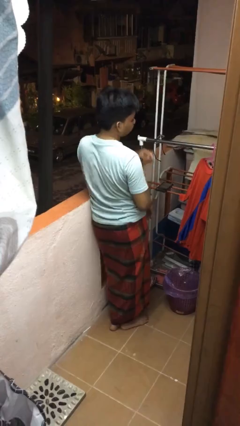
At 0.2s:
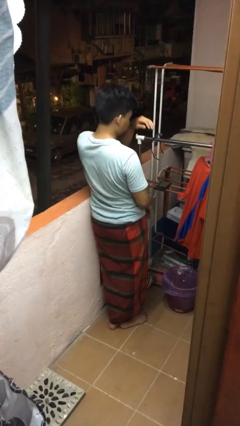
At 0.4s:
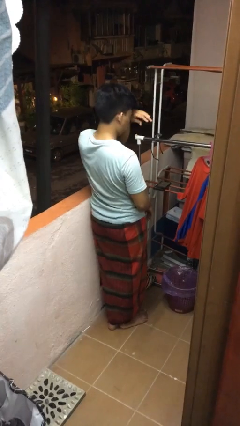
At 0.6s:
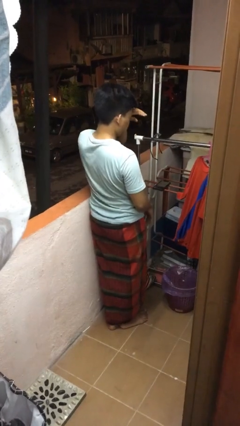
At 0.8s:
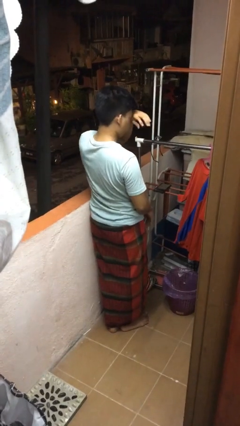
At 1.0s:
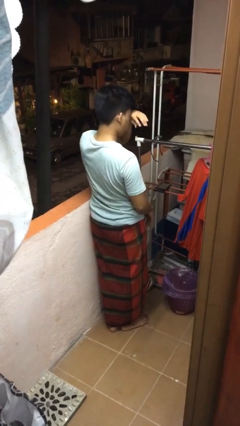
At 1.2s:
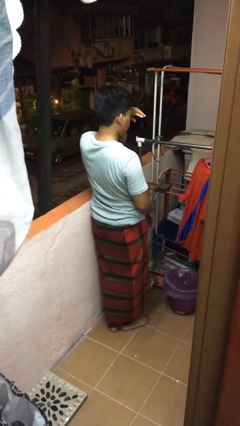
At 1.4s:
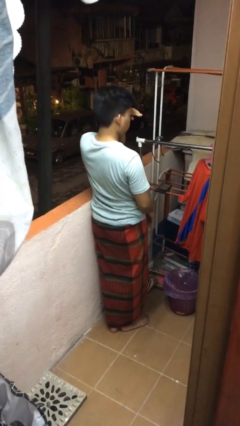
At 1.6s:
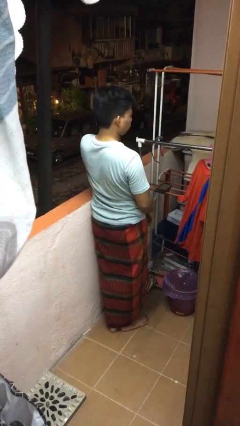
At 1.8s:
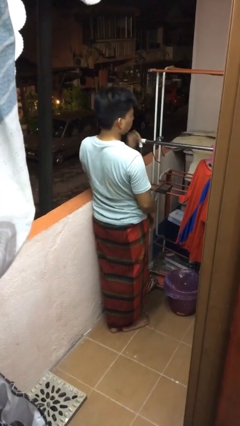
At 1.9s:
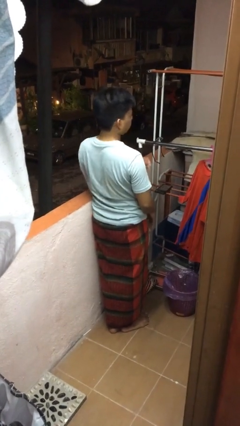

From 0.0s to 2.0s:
person rubs eyes

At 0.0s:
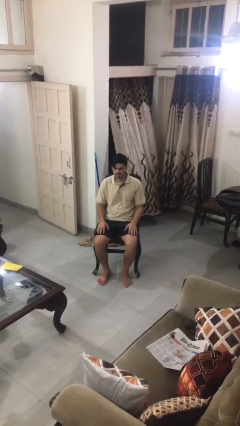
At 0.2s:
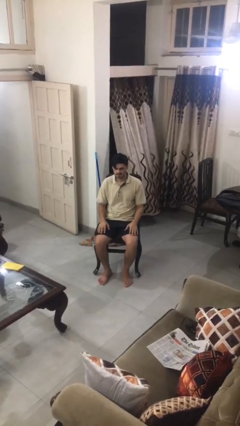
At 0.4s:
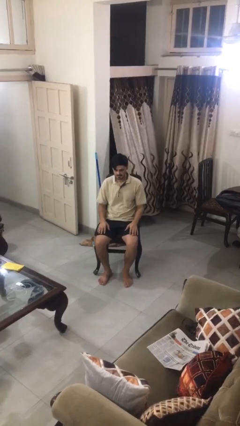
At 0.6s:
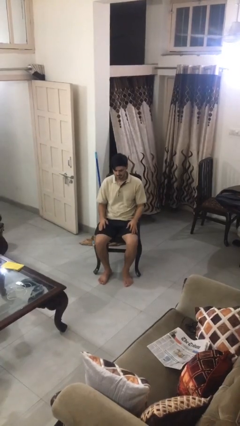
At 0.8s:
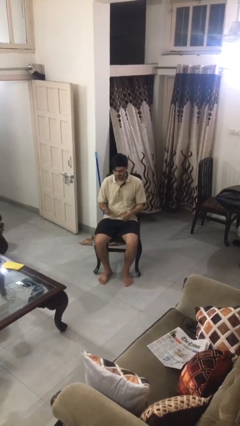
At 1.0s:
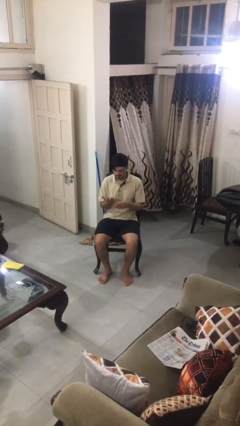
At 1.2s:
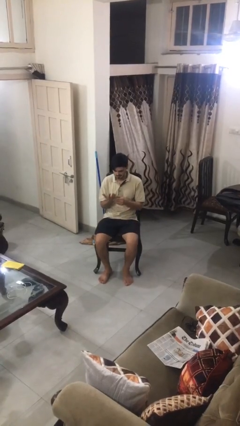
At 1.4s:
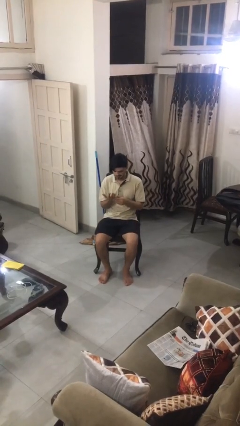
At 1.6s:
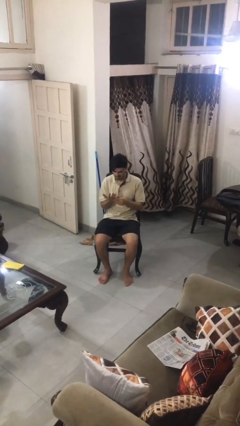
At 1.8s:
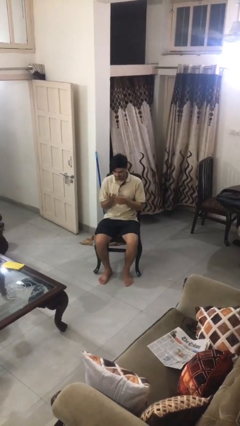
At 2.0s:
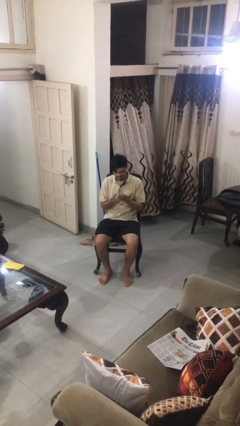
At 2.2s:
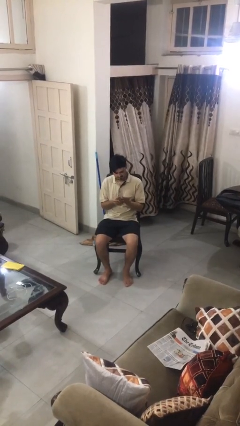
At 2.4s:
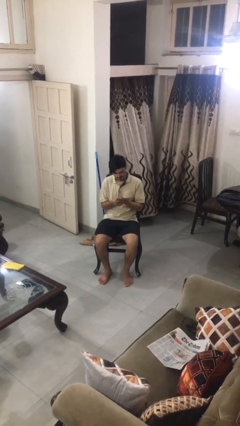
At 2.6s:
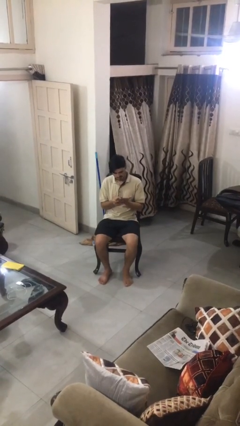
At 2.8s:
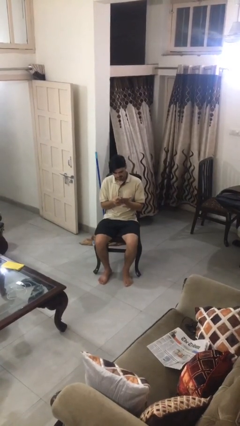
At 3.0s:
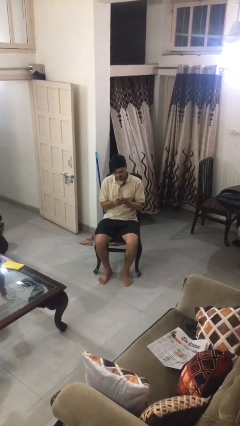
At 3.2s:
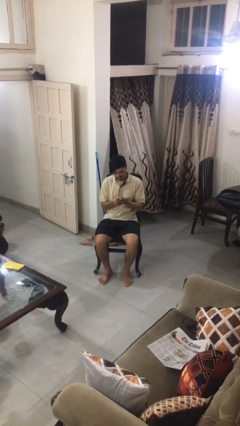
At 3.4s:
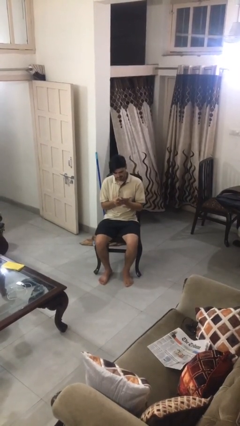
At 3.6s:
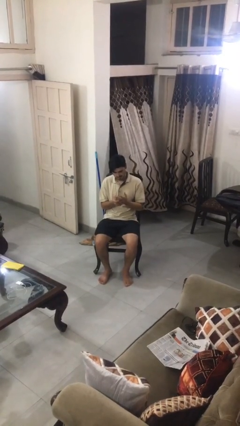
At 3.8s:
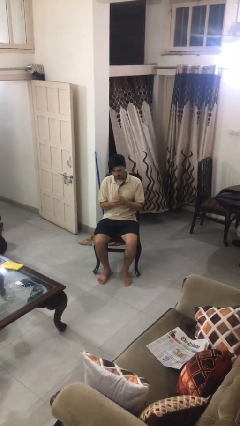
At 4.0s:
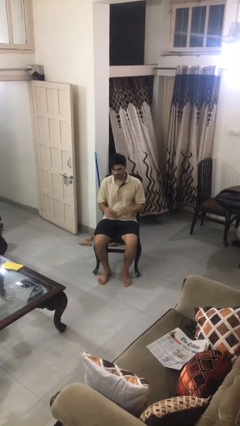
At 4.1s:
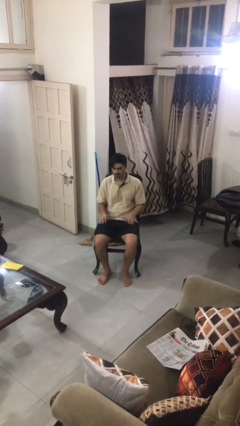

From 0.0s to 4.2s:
person looks at hands in lap

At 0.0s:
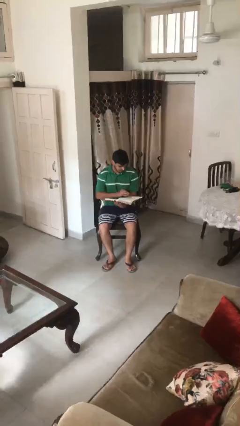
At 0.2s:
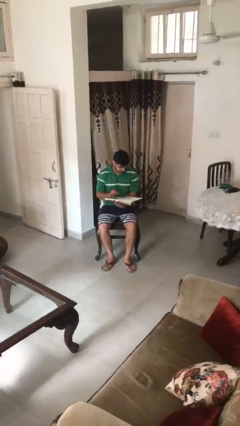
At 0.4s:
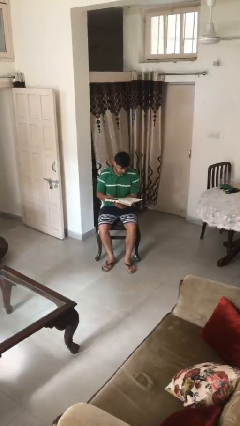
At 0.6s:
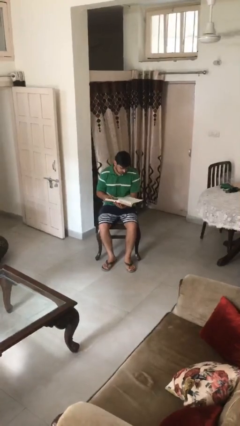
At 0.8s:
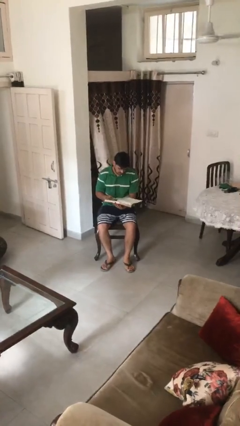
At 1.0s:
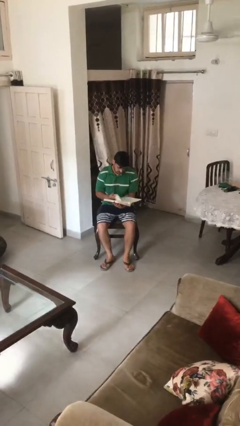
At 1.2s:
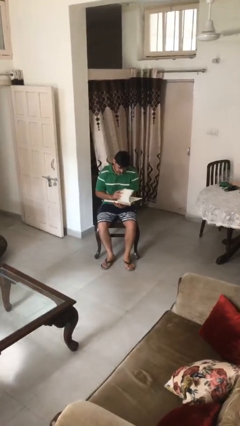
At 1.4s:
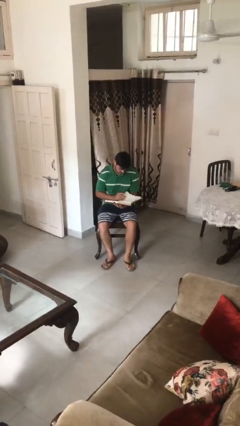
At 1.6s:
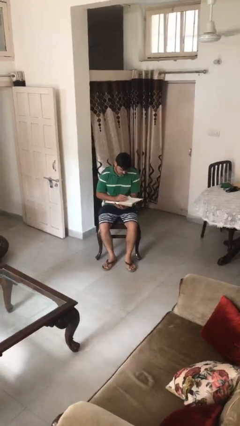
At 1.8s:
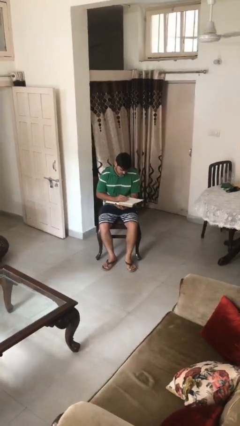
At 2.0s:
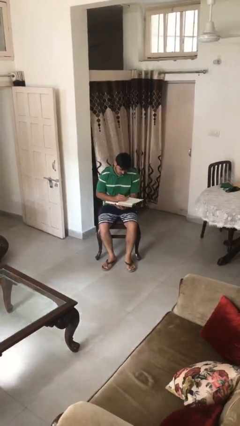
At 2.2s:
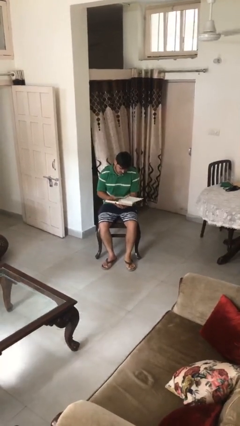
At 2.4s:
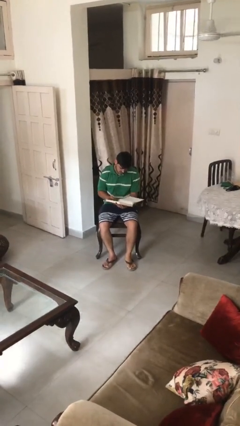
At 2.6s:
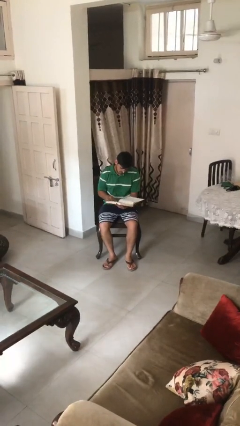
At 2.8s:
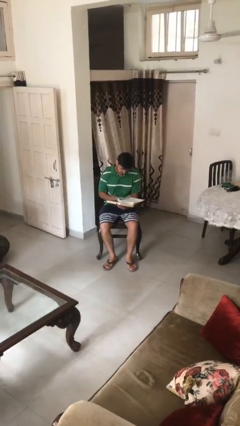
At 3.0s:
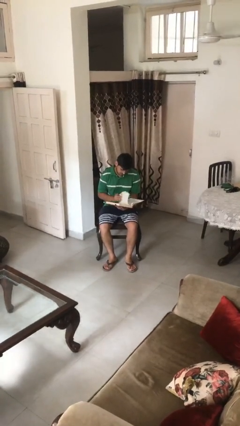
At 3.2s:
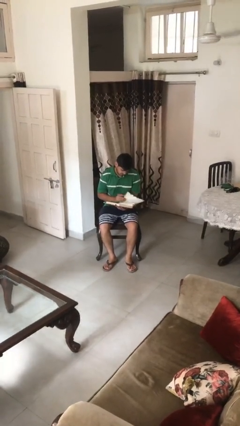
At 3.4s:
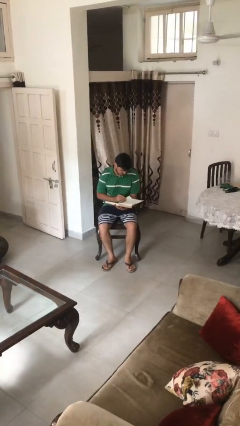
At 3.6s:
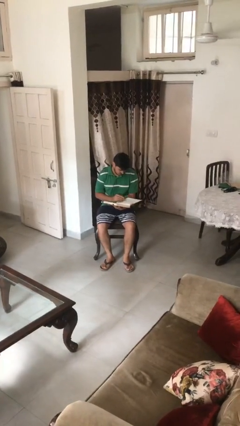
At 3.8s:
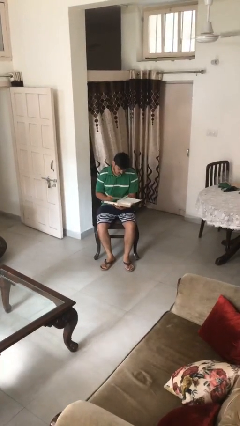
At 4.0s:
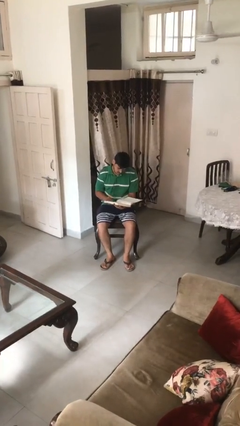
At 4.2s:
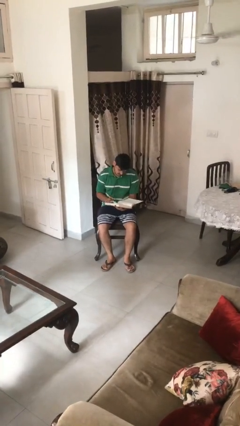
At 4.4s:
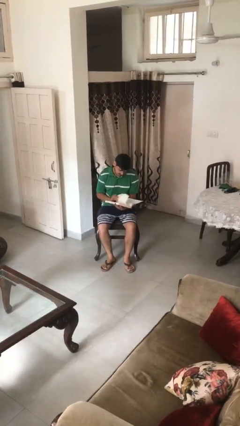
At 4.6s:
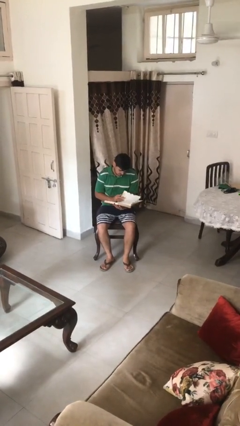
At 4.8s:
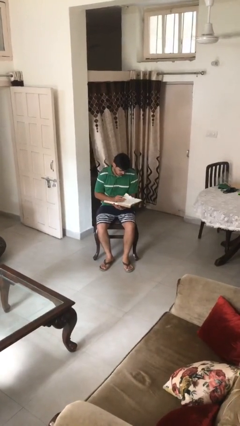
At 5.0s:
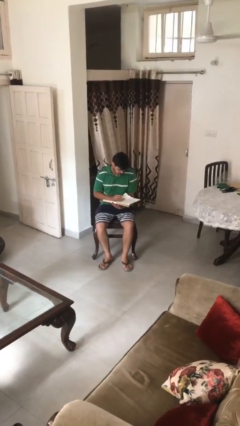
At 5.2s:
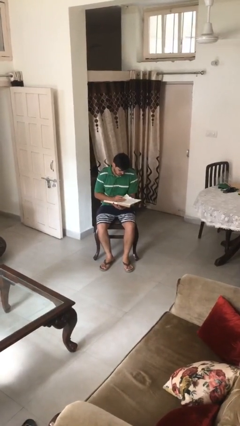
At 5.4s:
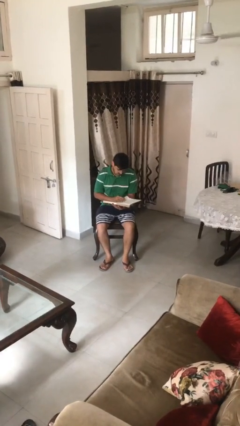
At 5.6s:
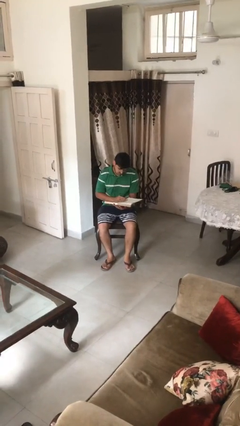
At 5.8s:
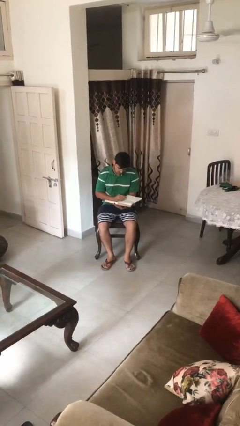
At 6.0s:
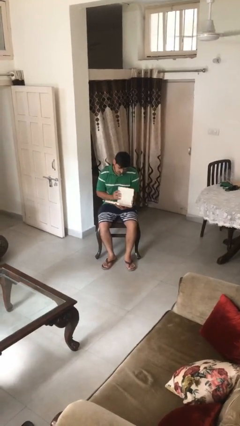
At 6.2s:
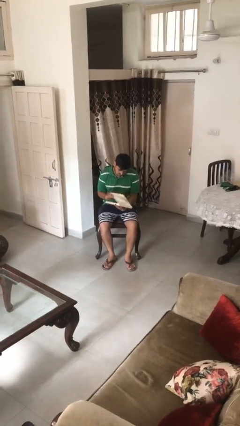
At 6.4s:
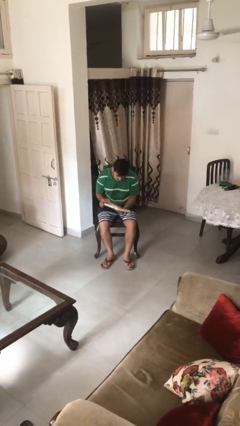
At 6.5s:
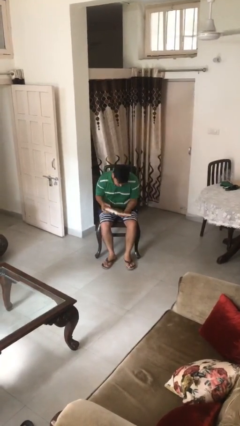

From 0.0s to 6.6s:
person reads document

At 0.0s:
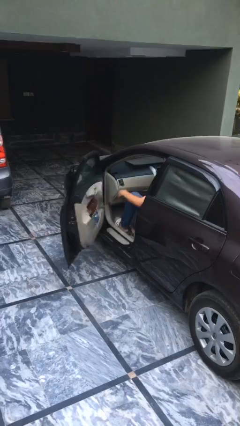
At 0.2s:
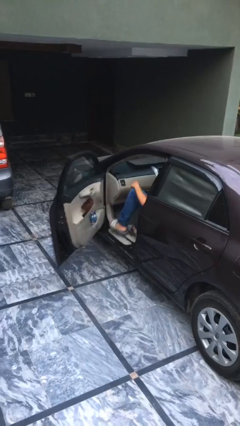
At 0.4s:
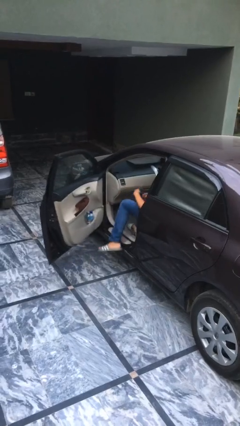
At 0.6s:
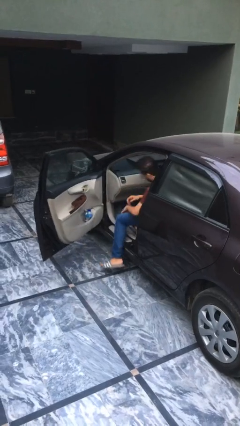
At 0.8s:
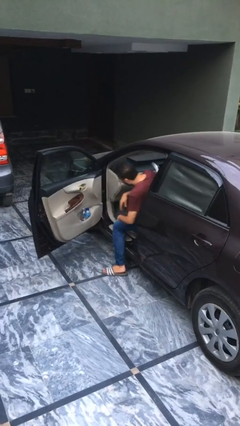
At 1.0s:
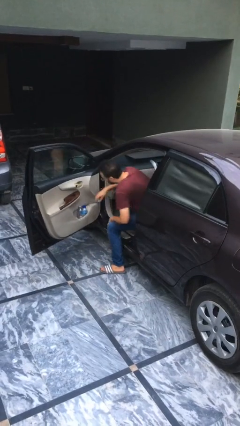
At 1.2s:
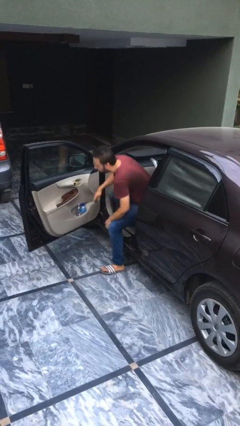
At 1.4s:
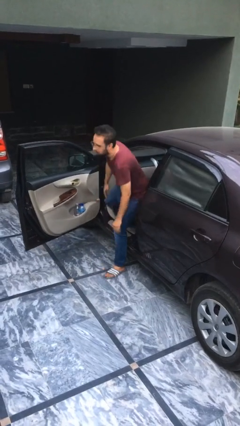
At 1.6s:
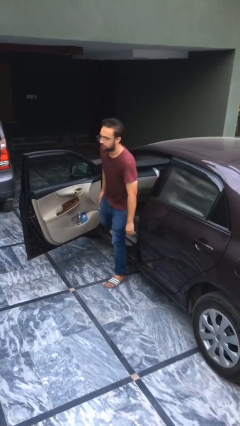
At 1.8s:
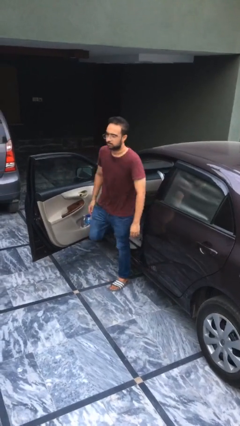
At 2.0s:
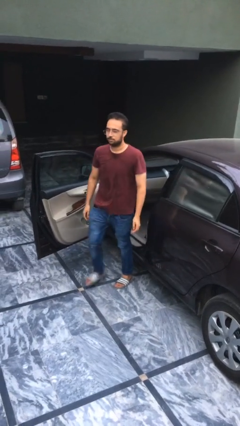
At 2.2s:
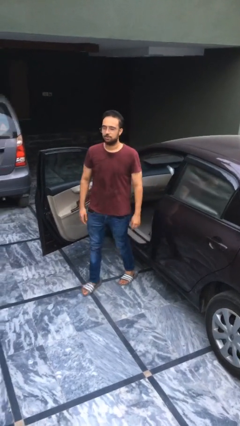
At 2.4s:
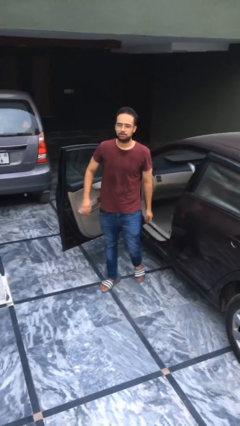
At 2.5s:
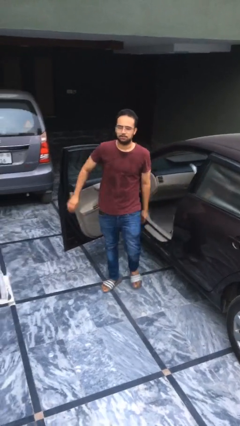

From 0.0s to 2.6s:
person exits car

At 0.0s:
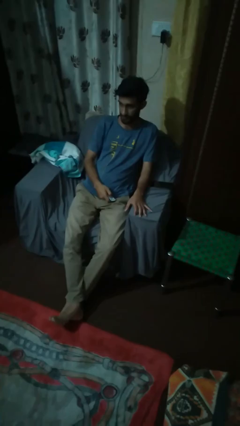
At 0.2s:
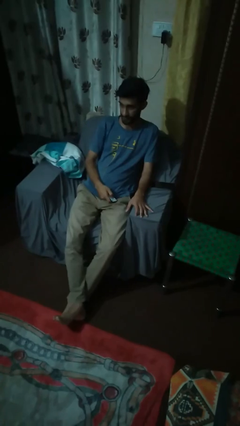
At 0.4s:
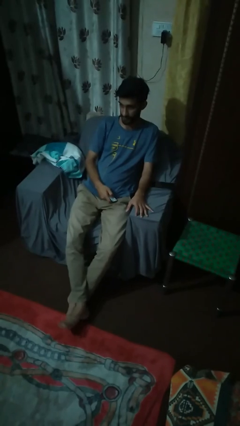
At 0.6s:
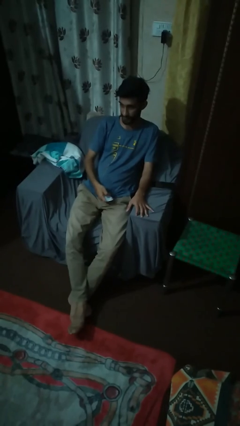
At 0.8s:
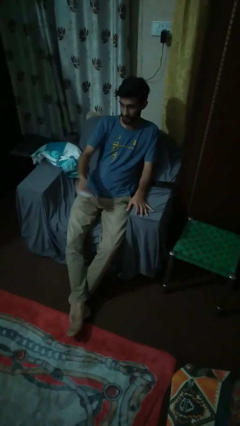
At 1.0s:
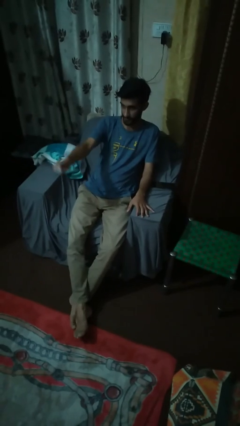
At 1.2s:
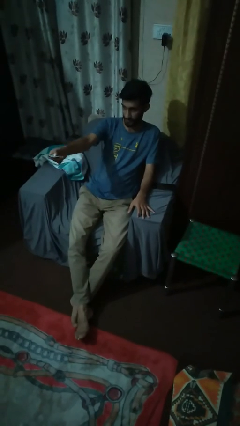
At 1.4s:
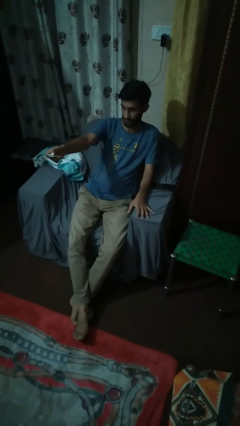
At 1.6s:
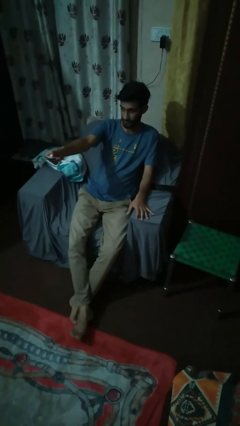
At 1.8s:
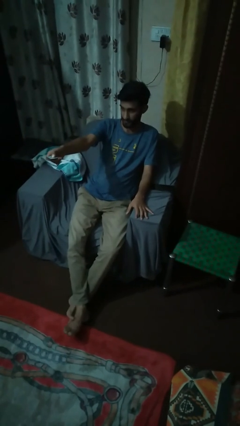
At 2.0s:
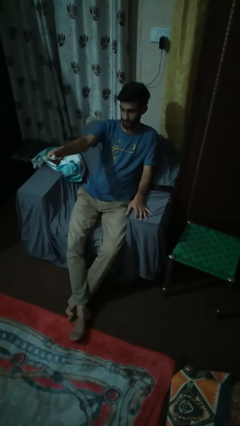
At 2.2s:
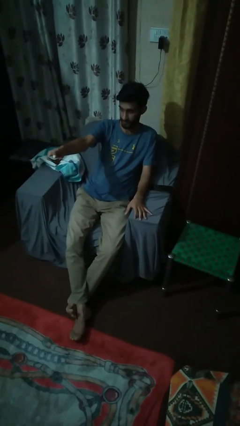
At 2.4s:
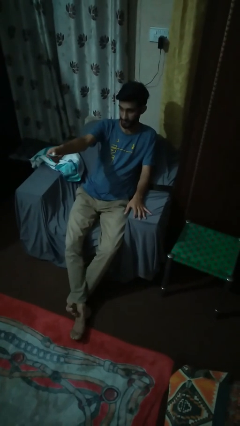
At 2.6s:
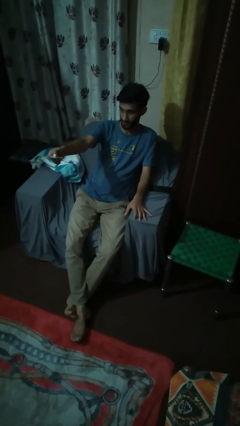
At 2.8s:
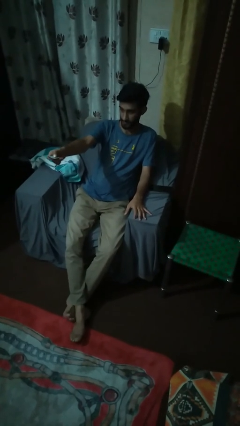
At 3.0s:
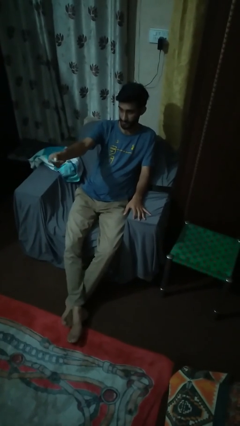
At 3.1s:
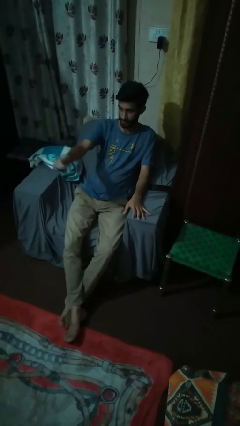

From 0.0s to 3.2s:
person uses television remote
